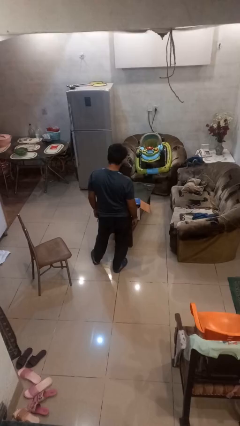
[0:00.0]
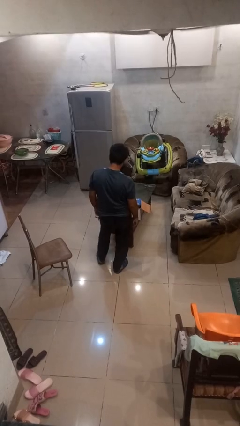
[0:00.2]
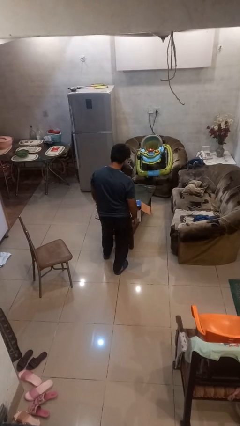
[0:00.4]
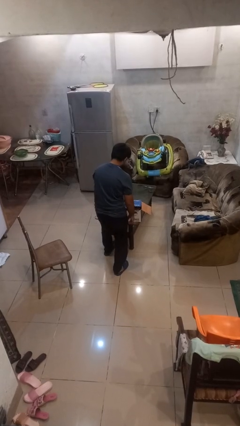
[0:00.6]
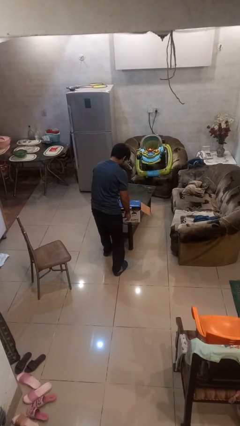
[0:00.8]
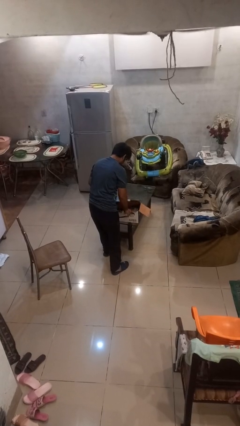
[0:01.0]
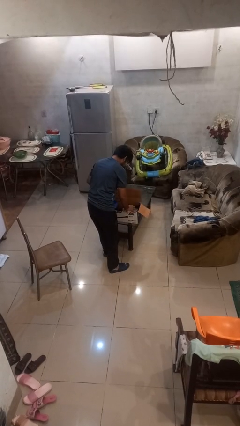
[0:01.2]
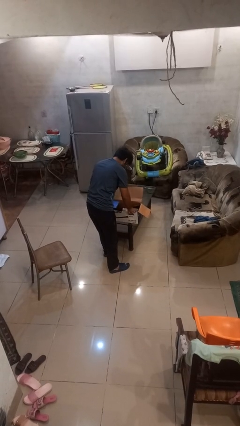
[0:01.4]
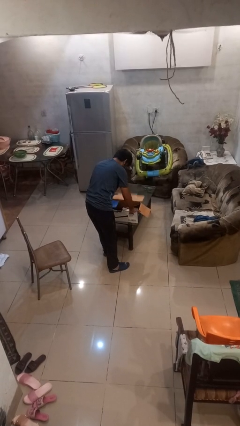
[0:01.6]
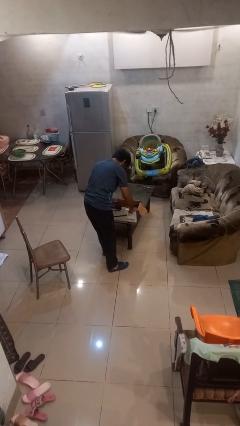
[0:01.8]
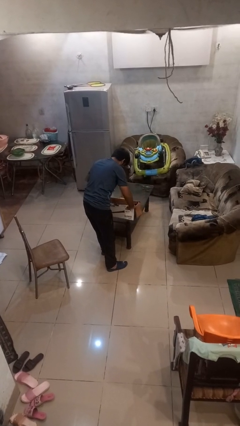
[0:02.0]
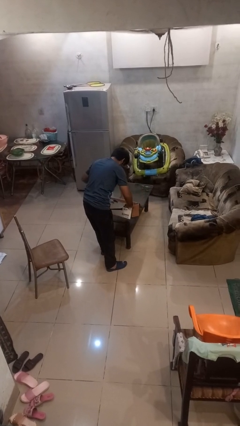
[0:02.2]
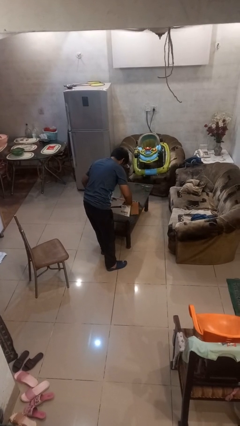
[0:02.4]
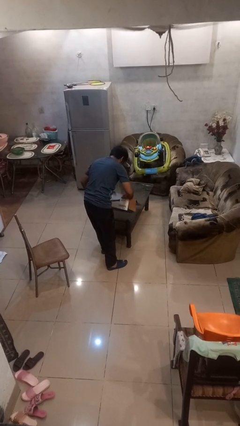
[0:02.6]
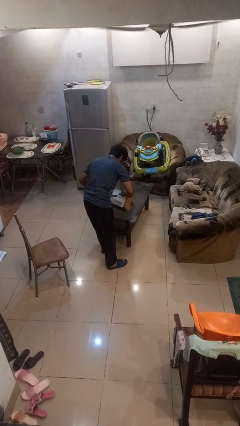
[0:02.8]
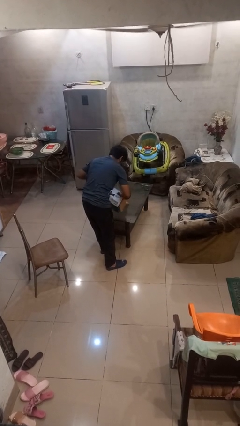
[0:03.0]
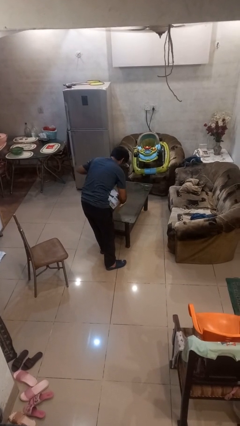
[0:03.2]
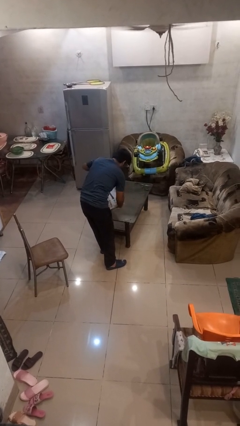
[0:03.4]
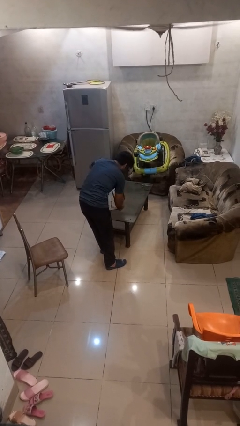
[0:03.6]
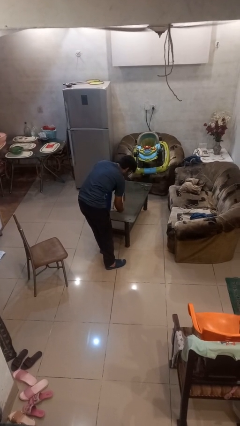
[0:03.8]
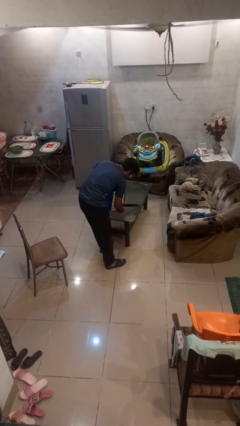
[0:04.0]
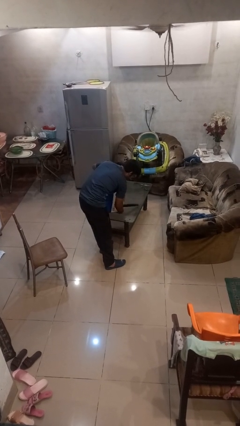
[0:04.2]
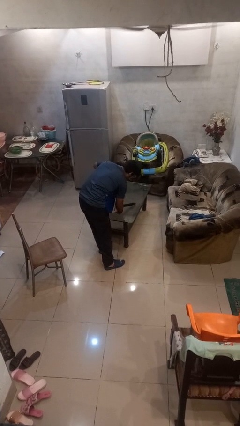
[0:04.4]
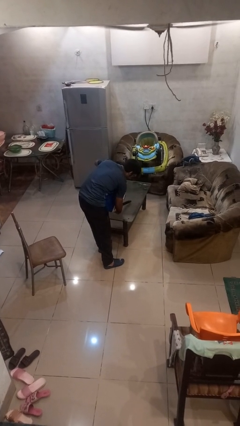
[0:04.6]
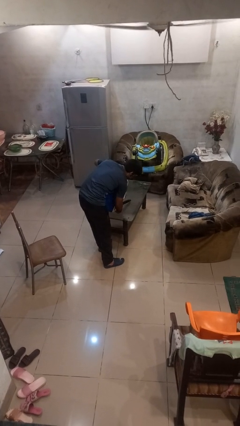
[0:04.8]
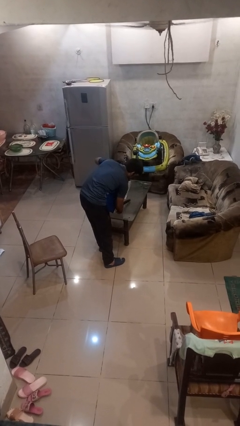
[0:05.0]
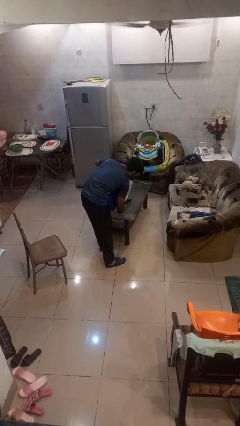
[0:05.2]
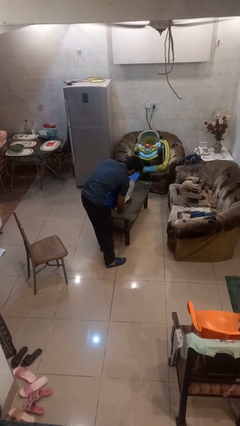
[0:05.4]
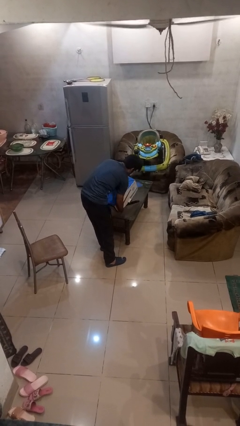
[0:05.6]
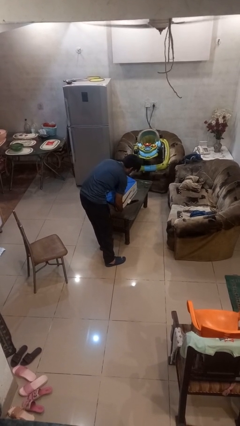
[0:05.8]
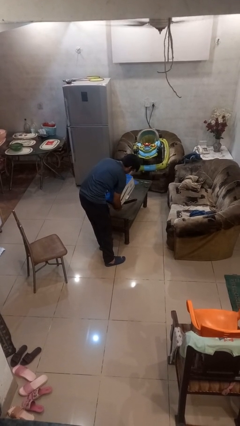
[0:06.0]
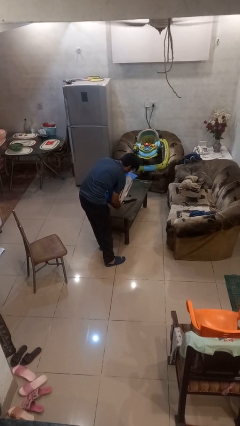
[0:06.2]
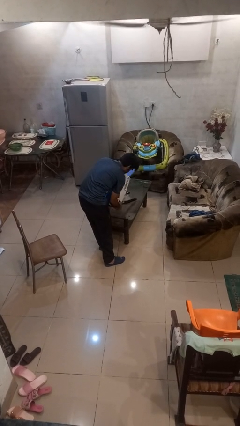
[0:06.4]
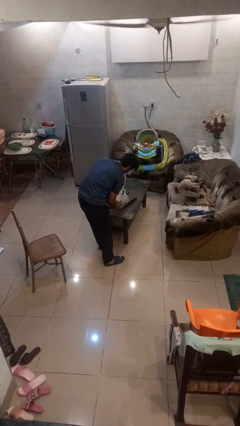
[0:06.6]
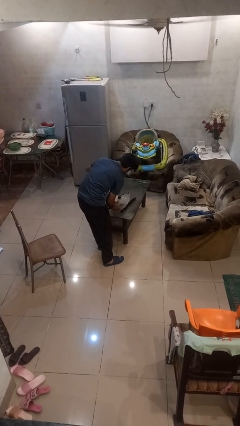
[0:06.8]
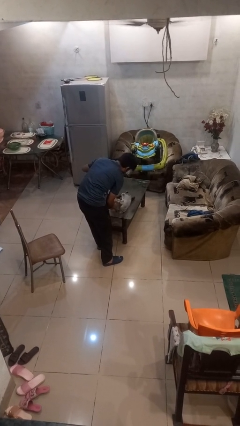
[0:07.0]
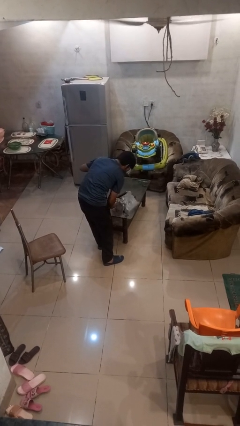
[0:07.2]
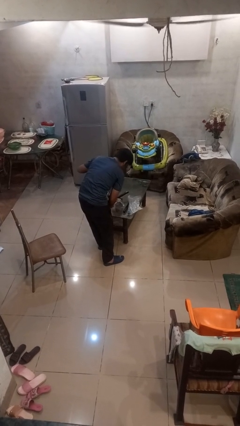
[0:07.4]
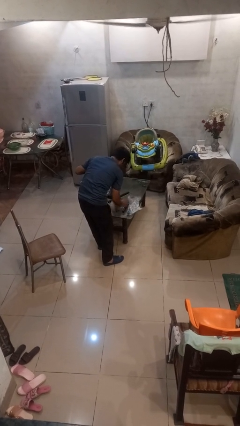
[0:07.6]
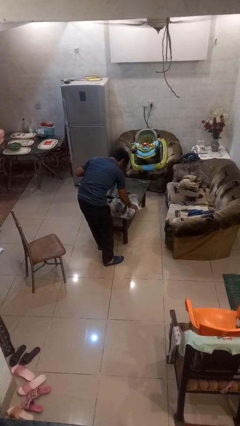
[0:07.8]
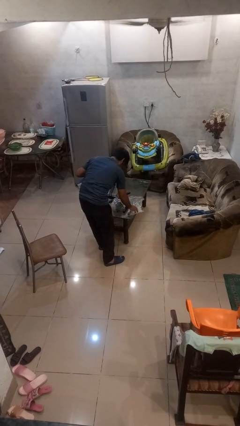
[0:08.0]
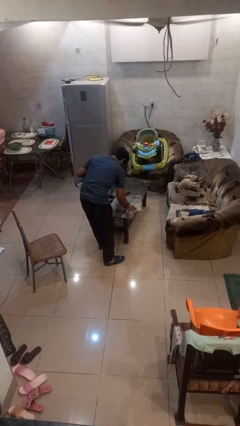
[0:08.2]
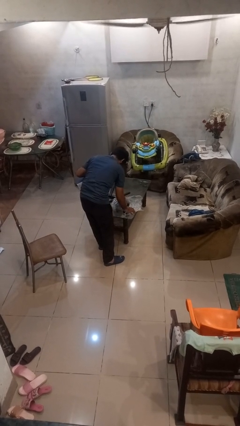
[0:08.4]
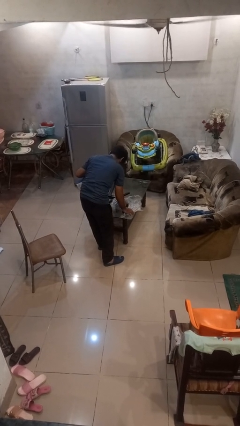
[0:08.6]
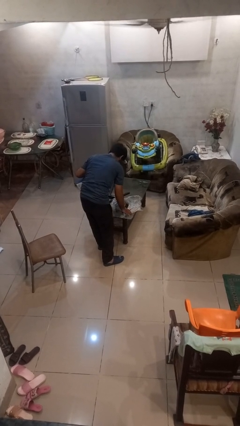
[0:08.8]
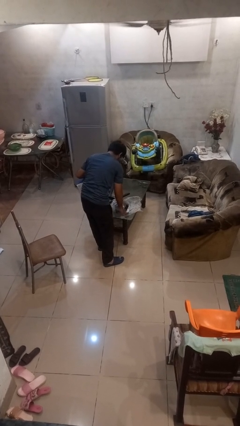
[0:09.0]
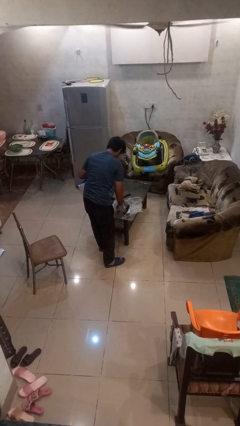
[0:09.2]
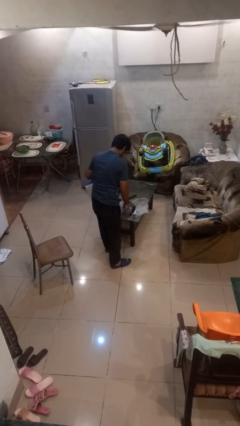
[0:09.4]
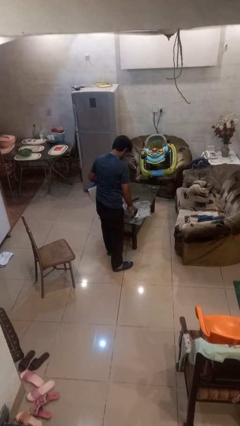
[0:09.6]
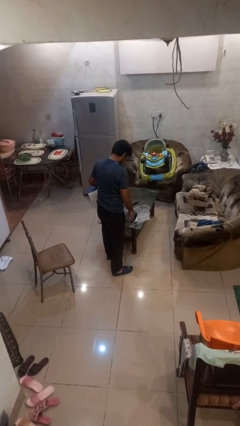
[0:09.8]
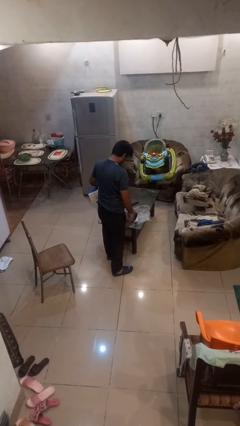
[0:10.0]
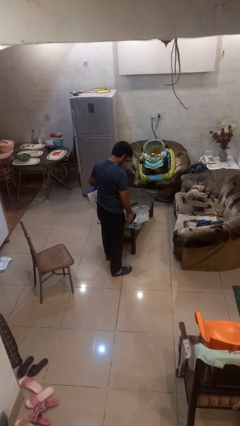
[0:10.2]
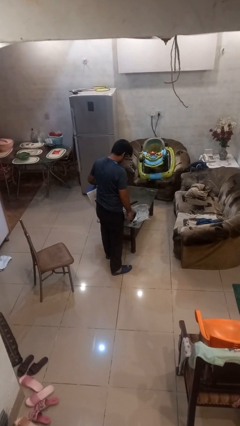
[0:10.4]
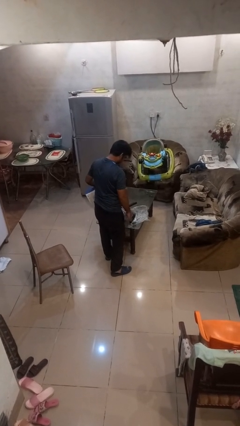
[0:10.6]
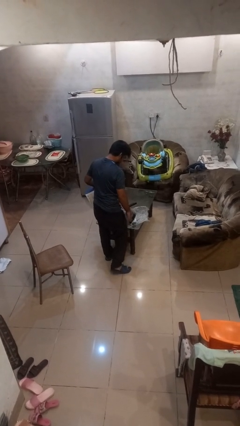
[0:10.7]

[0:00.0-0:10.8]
person unloads box onto table

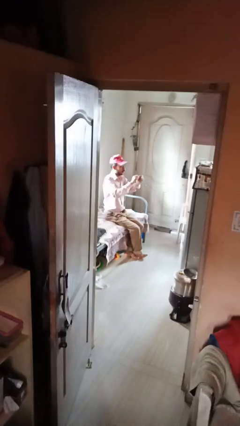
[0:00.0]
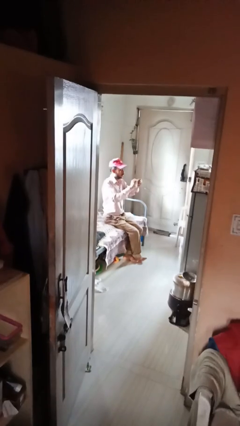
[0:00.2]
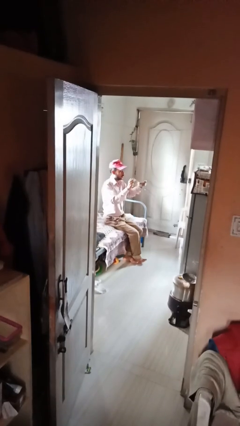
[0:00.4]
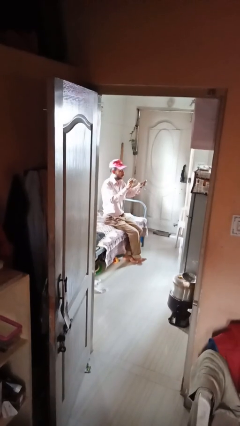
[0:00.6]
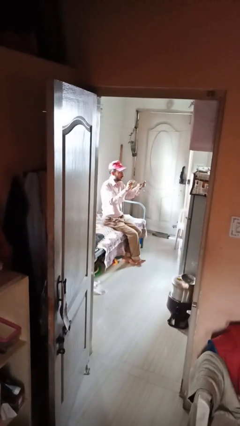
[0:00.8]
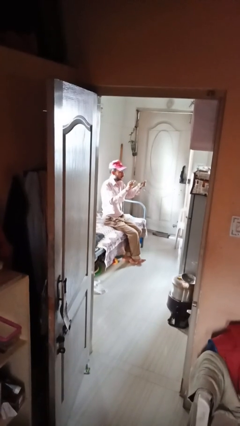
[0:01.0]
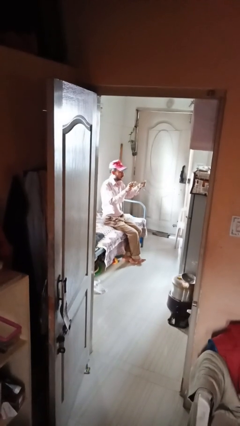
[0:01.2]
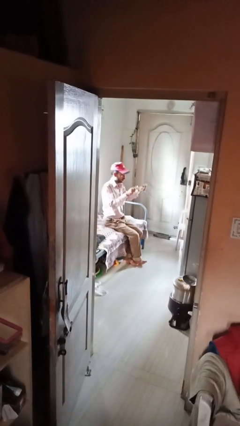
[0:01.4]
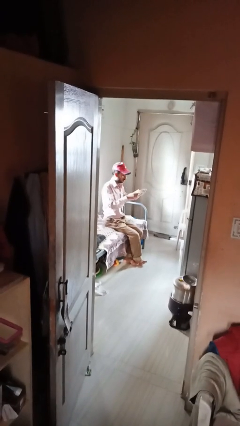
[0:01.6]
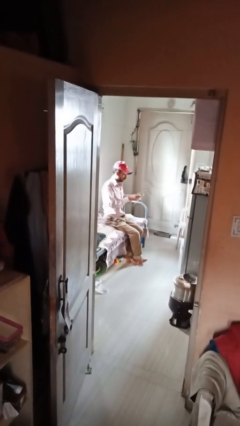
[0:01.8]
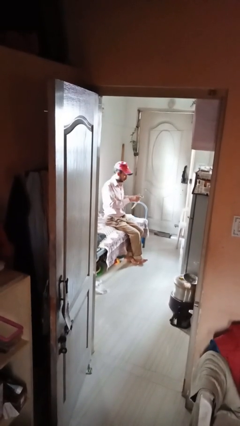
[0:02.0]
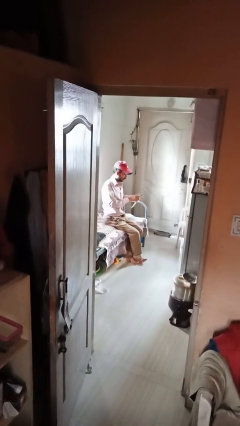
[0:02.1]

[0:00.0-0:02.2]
person tears paper

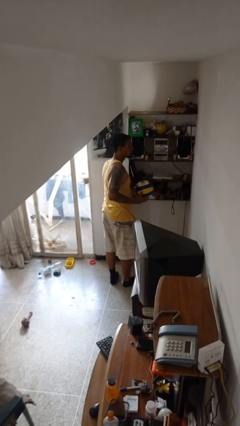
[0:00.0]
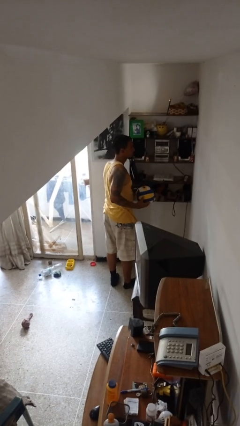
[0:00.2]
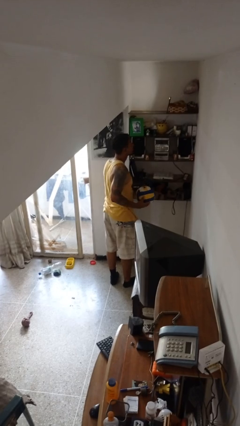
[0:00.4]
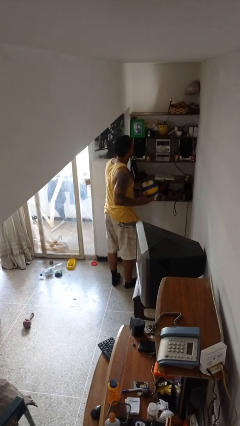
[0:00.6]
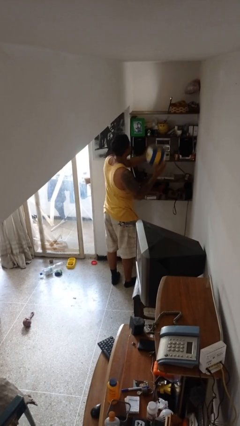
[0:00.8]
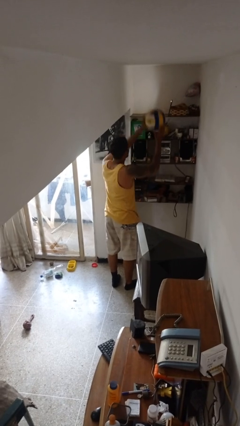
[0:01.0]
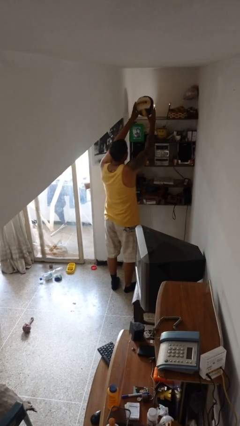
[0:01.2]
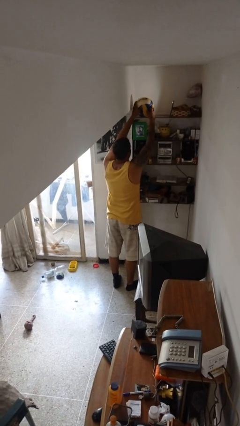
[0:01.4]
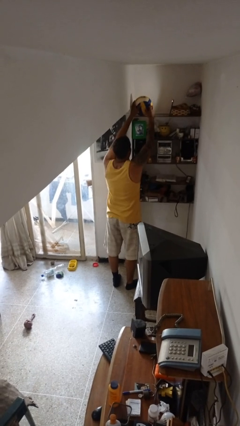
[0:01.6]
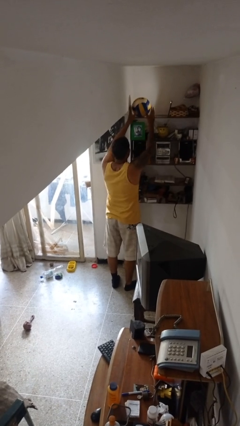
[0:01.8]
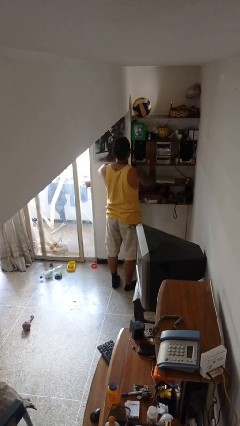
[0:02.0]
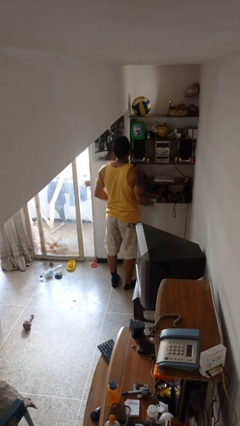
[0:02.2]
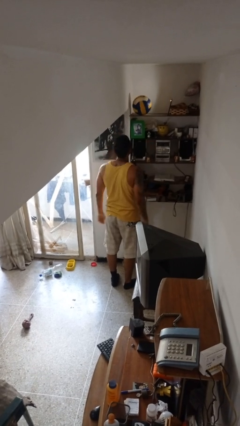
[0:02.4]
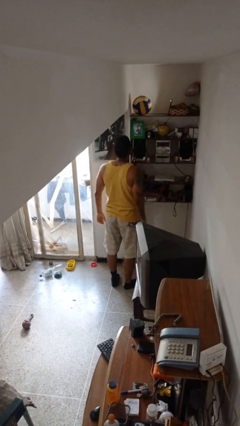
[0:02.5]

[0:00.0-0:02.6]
person puts down object on shelf

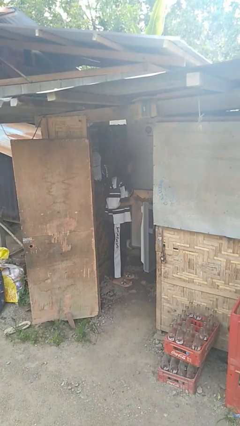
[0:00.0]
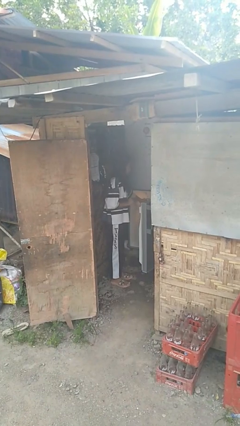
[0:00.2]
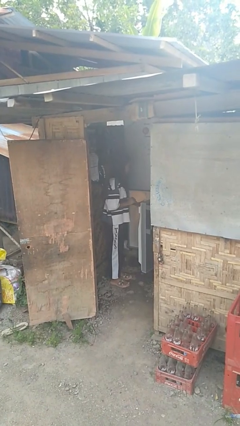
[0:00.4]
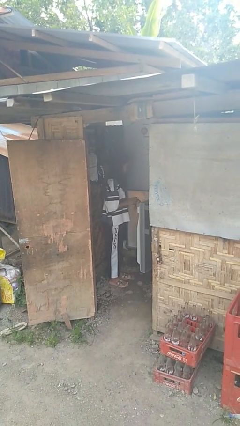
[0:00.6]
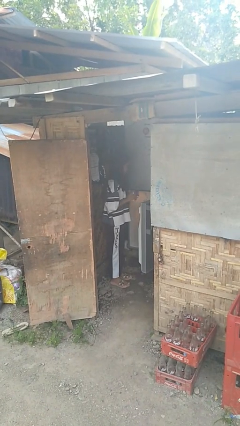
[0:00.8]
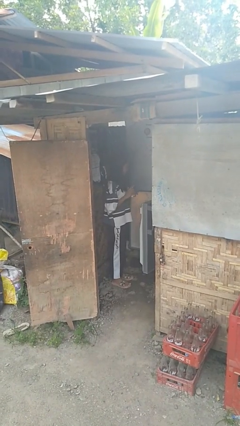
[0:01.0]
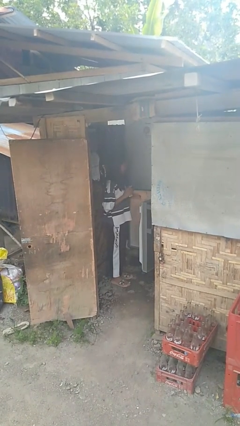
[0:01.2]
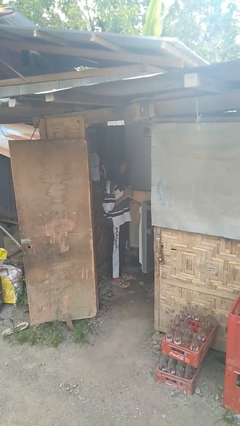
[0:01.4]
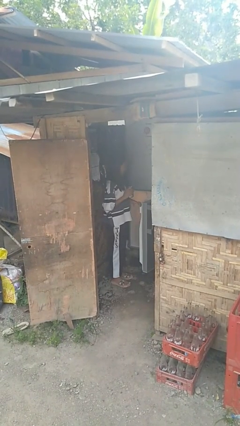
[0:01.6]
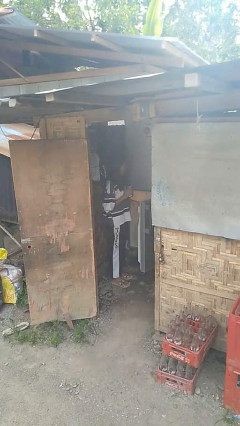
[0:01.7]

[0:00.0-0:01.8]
person takes object from refrigerator

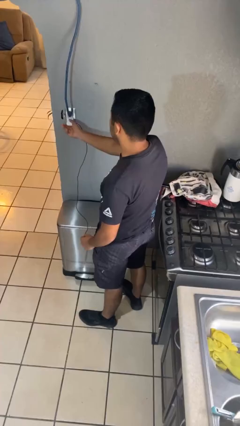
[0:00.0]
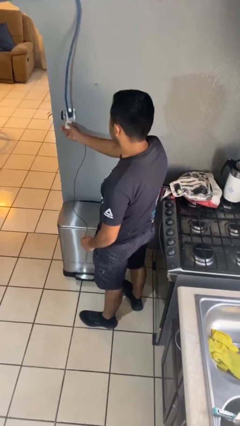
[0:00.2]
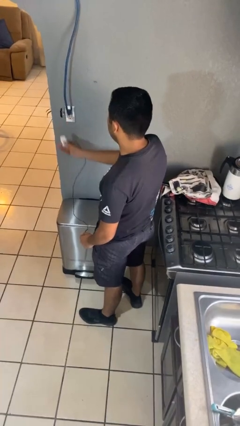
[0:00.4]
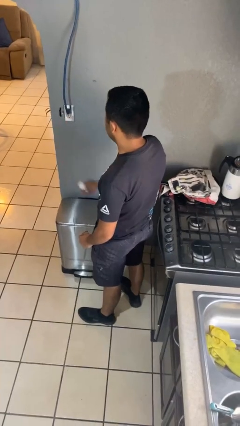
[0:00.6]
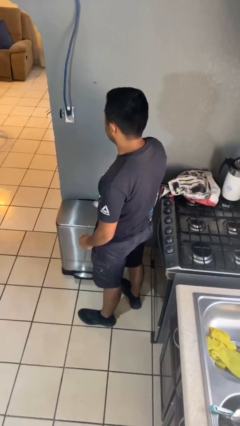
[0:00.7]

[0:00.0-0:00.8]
person unplugs from electrical socket
